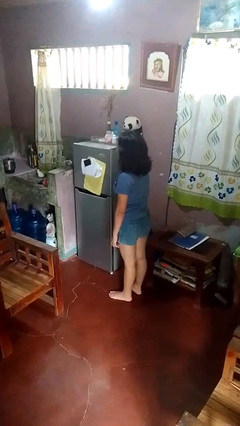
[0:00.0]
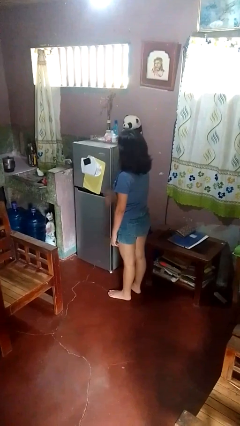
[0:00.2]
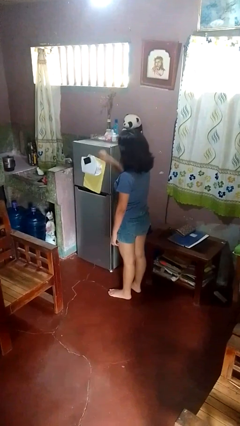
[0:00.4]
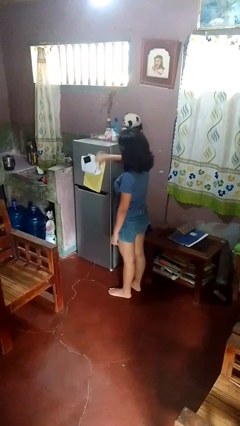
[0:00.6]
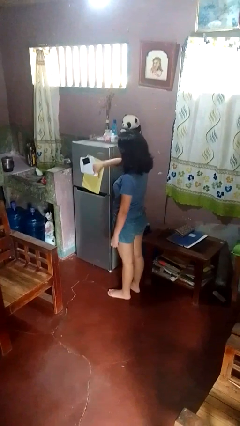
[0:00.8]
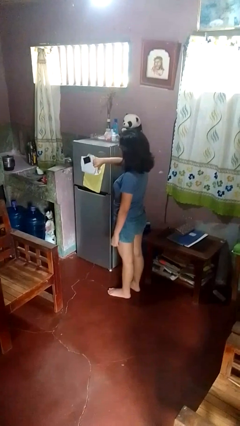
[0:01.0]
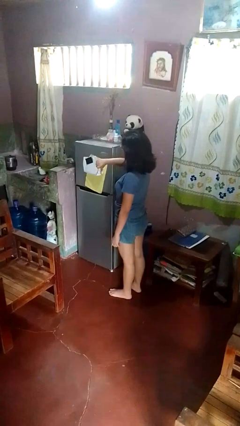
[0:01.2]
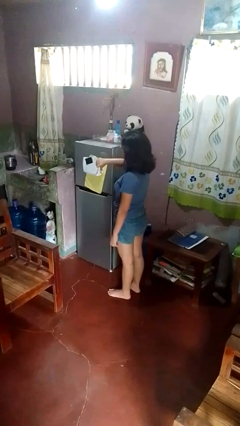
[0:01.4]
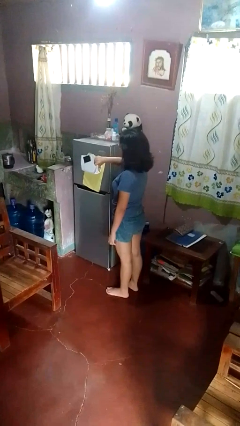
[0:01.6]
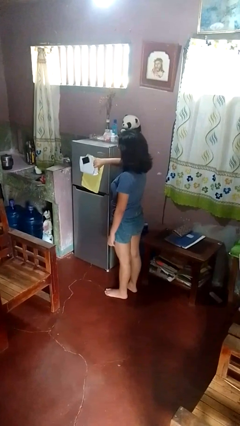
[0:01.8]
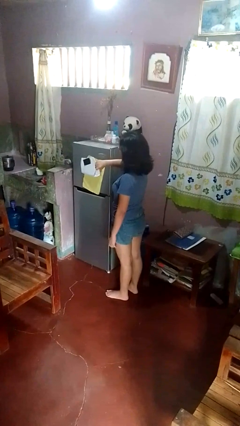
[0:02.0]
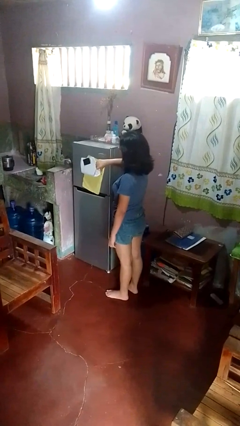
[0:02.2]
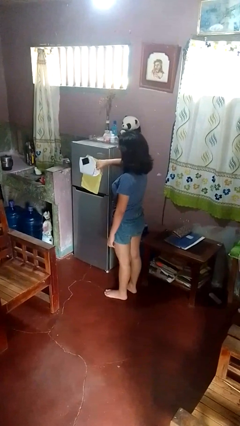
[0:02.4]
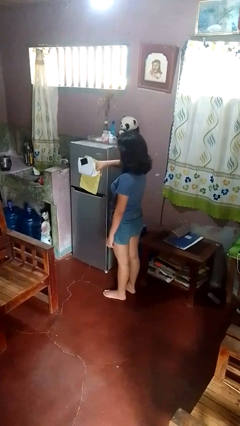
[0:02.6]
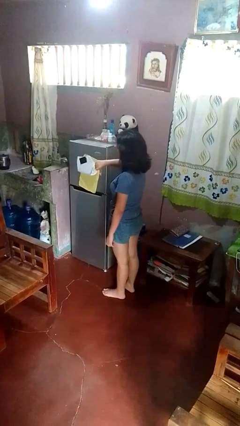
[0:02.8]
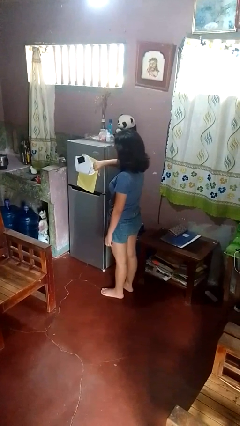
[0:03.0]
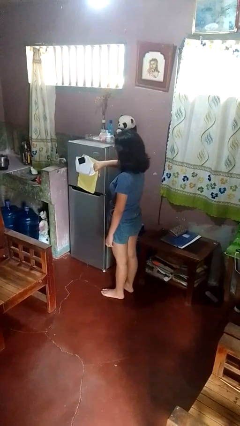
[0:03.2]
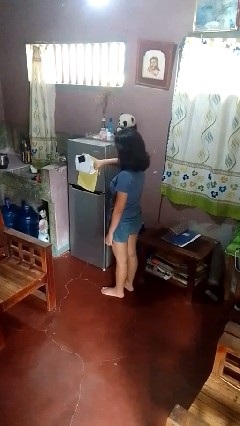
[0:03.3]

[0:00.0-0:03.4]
person gestures thumbs down

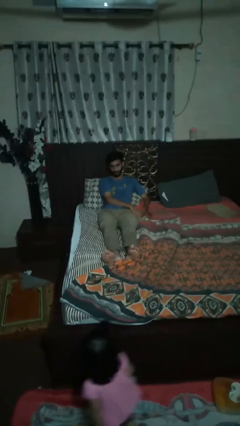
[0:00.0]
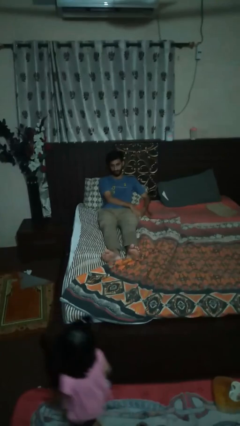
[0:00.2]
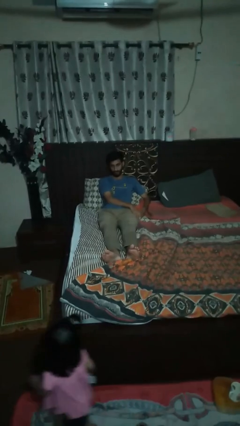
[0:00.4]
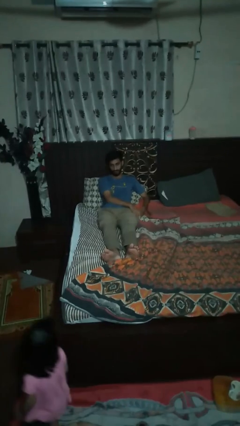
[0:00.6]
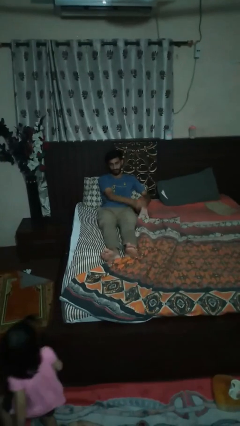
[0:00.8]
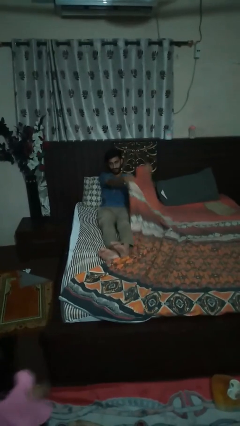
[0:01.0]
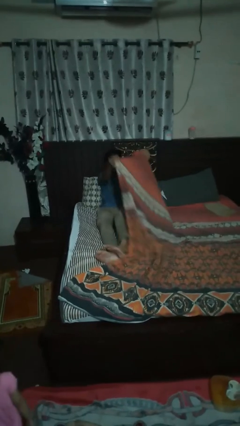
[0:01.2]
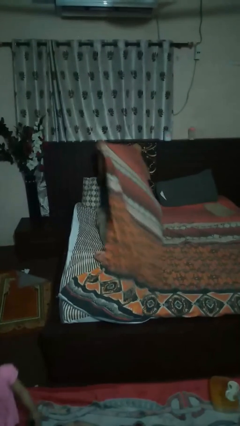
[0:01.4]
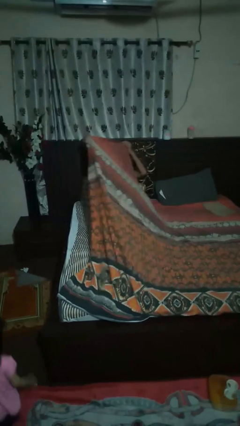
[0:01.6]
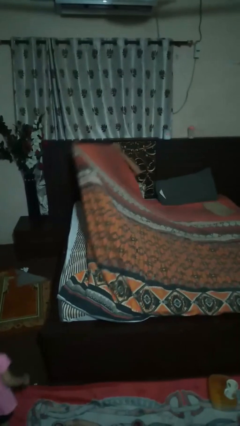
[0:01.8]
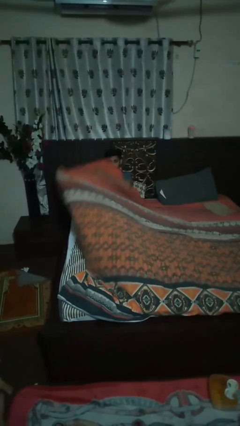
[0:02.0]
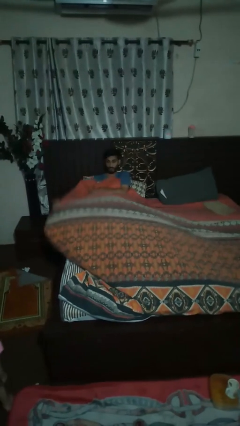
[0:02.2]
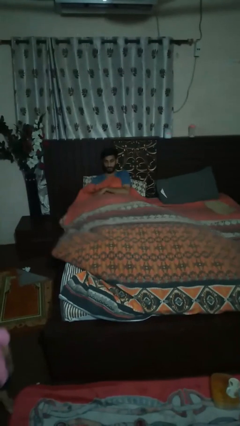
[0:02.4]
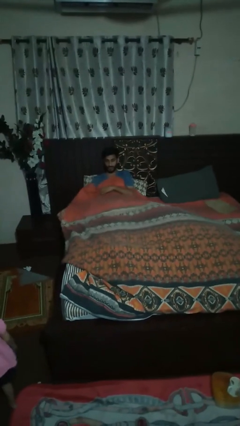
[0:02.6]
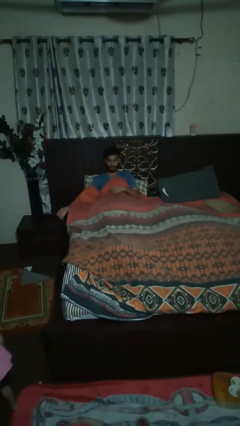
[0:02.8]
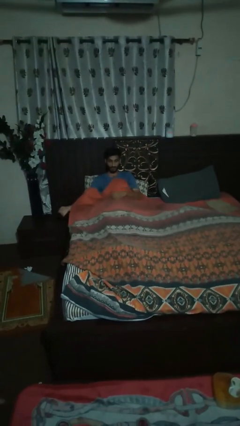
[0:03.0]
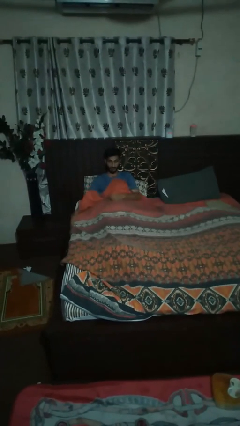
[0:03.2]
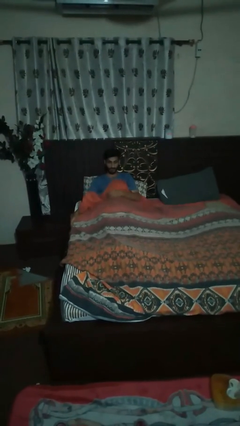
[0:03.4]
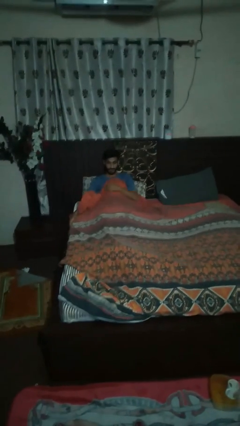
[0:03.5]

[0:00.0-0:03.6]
person covers with bedsheets

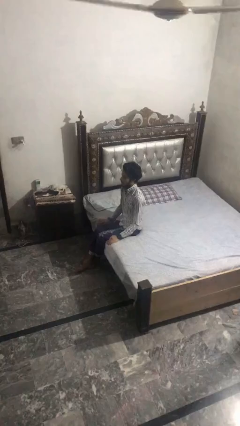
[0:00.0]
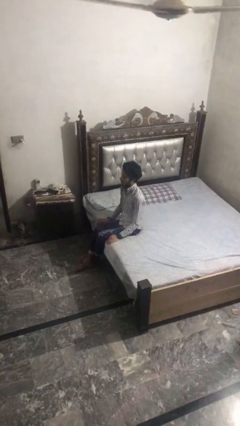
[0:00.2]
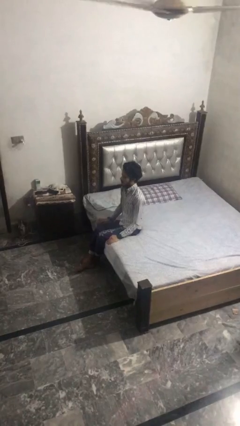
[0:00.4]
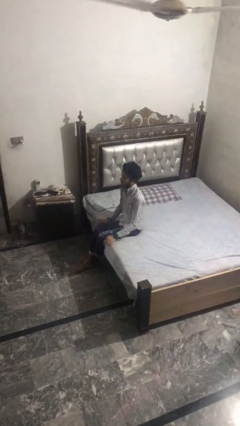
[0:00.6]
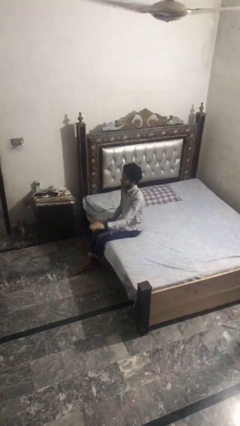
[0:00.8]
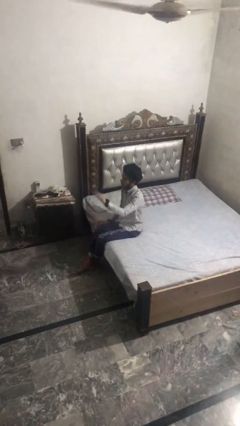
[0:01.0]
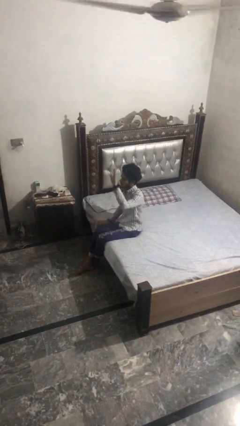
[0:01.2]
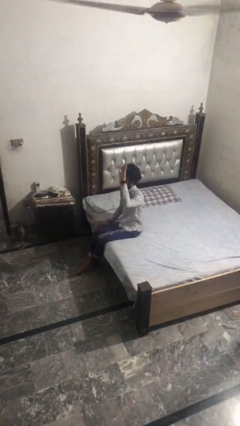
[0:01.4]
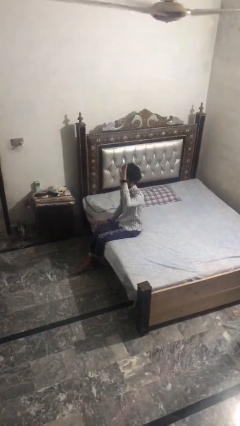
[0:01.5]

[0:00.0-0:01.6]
person gestures raise hand

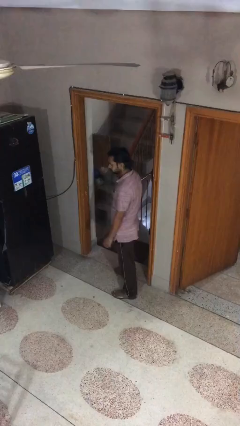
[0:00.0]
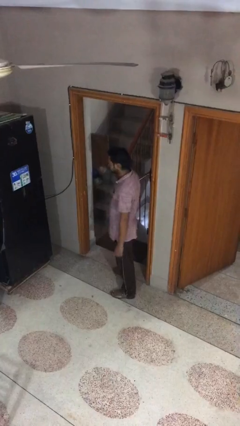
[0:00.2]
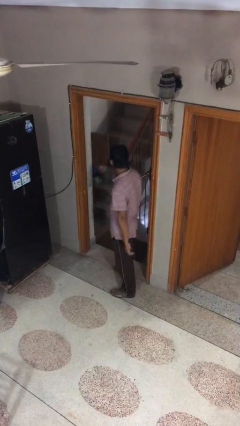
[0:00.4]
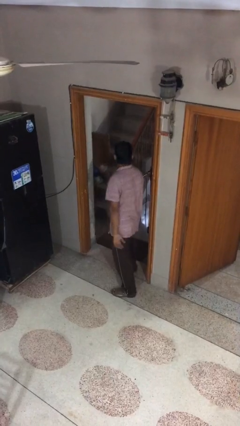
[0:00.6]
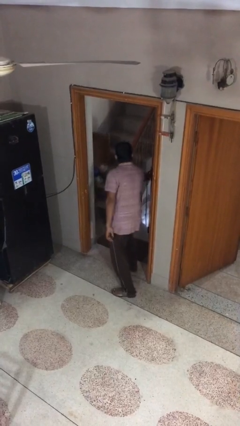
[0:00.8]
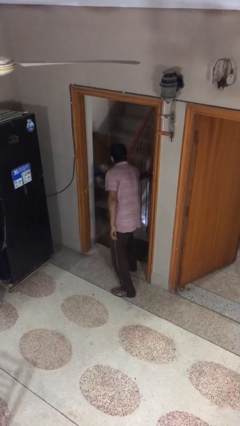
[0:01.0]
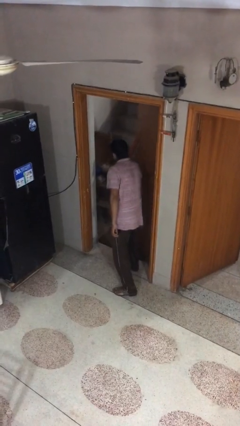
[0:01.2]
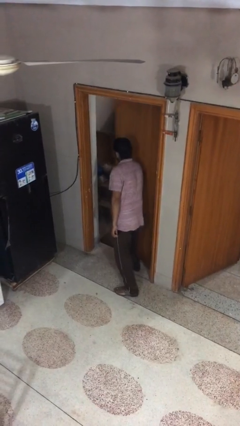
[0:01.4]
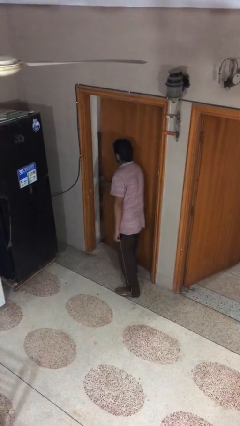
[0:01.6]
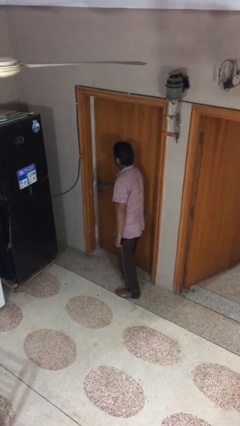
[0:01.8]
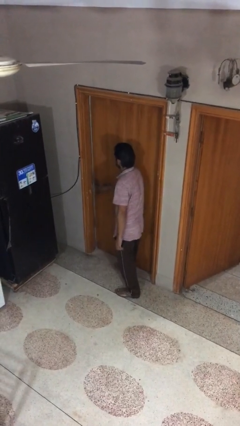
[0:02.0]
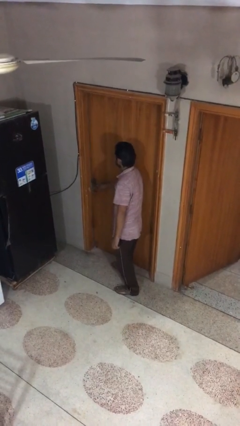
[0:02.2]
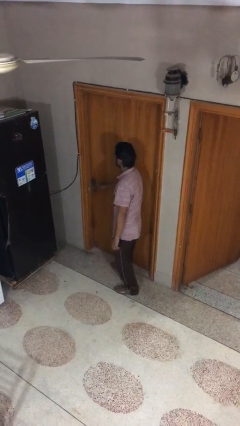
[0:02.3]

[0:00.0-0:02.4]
person closes facility door

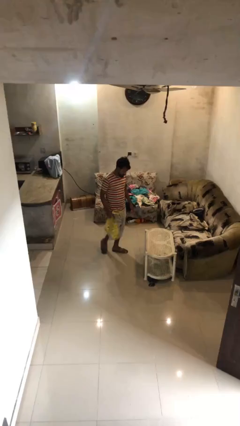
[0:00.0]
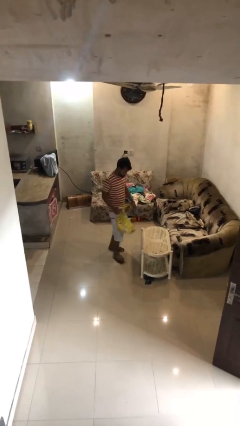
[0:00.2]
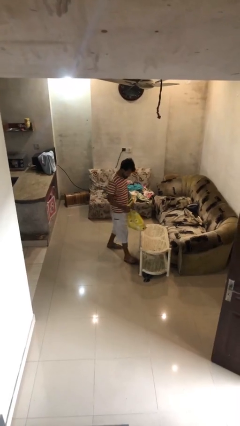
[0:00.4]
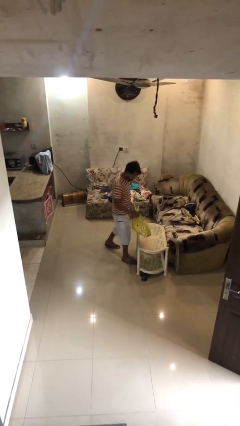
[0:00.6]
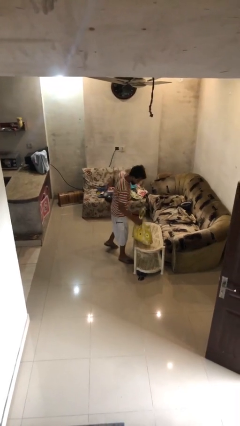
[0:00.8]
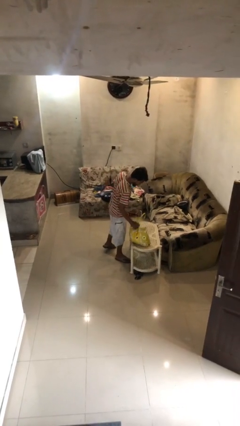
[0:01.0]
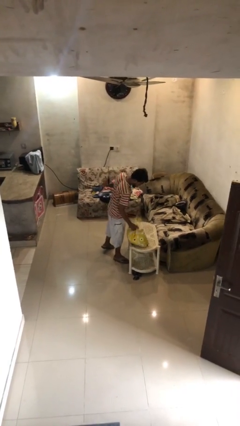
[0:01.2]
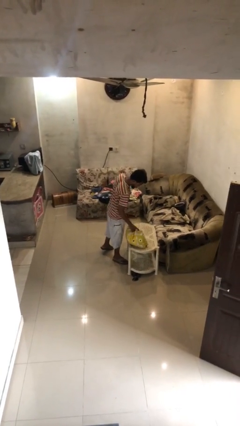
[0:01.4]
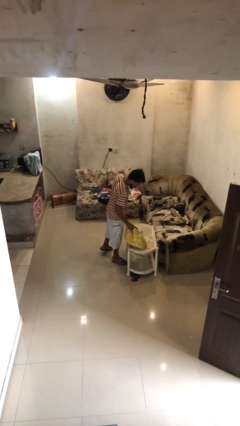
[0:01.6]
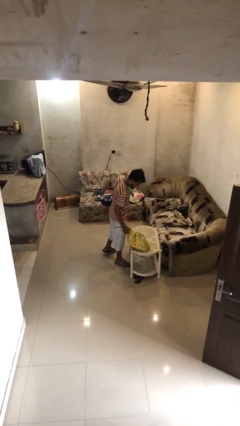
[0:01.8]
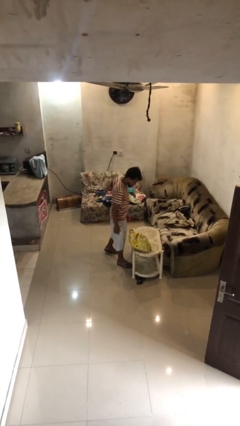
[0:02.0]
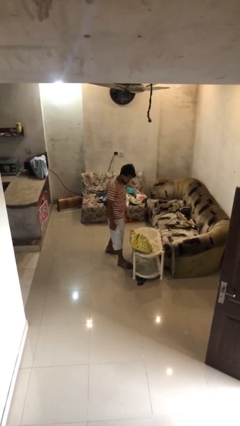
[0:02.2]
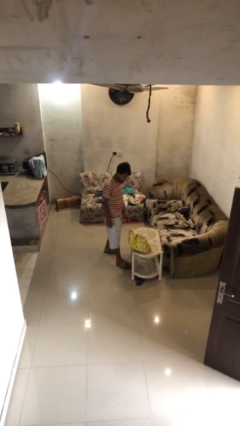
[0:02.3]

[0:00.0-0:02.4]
person puts down object on table

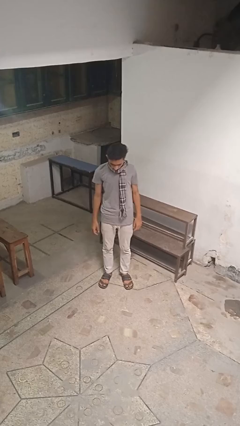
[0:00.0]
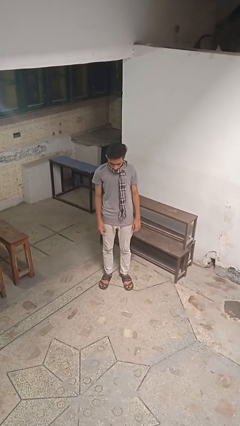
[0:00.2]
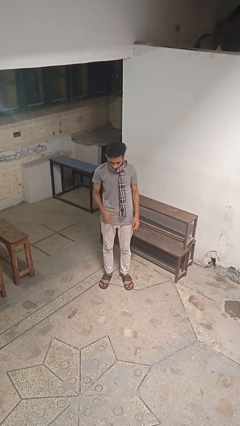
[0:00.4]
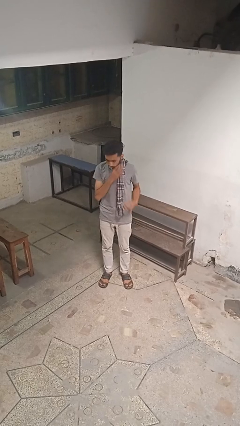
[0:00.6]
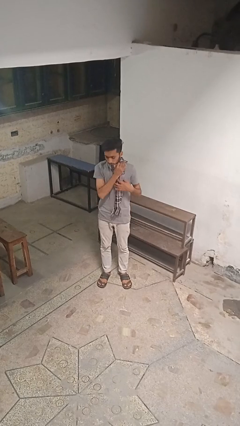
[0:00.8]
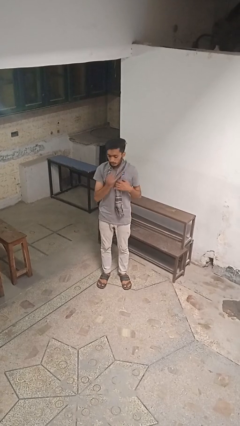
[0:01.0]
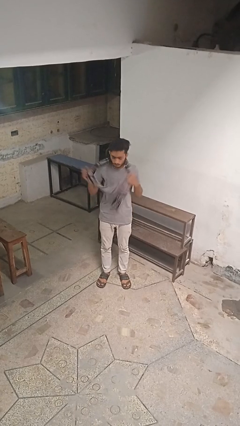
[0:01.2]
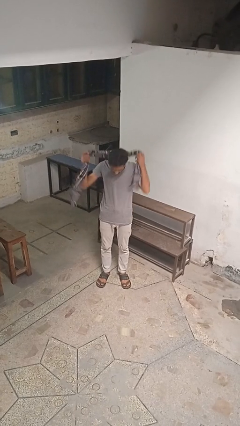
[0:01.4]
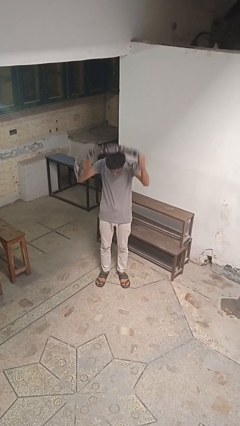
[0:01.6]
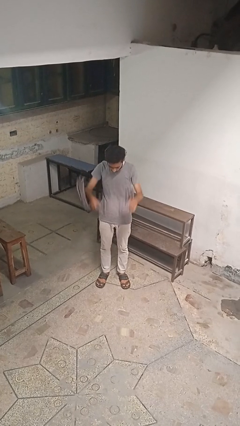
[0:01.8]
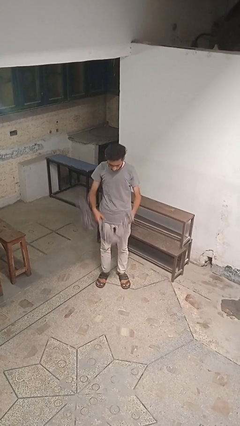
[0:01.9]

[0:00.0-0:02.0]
person takes off scarf

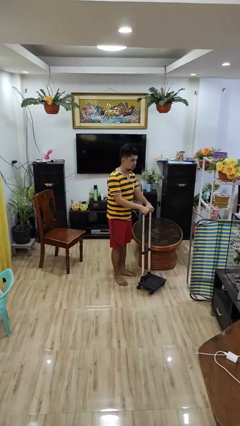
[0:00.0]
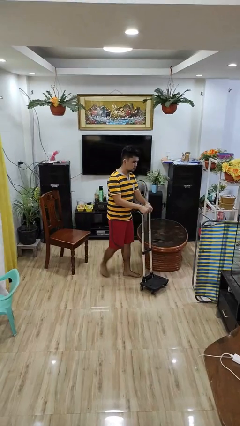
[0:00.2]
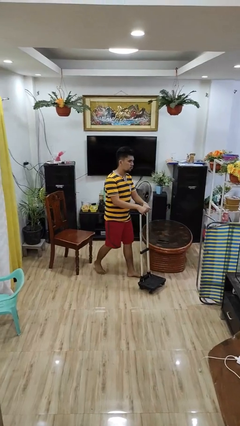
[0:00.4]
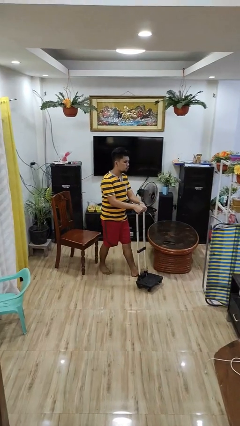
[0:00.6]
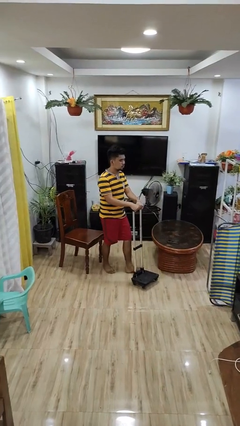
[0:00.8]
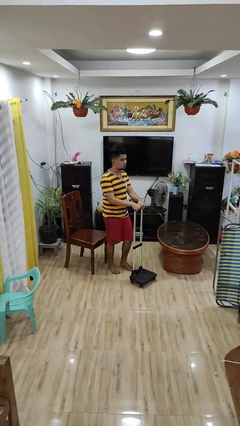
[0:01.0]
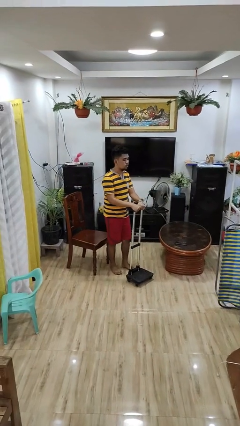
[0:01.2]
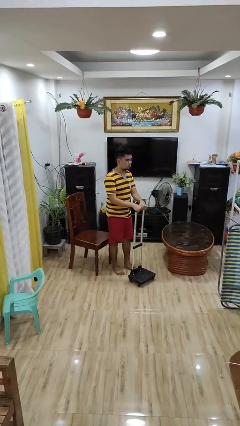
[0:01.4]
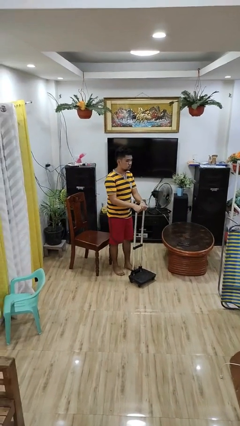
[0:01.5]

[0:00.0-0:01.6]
person pulls wheeled cart

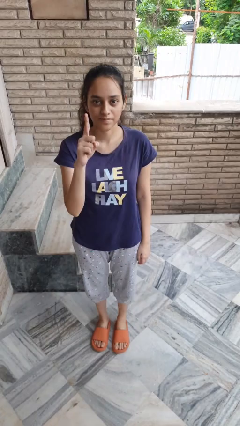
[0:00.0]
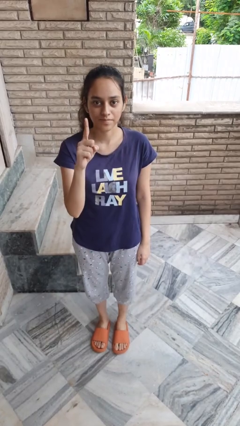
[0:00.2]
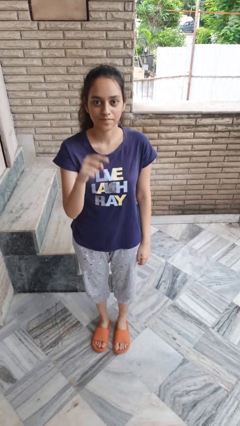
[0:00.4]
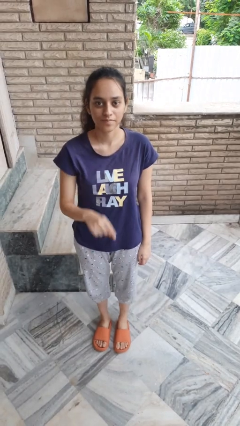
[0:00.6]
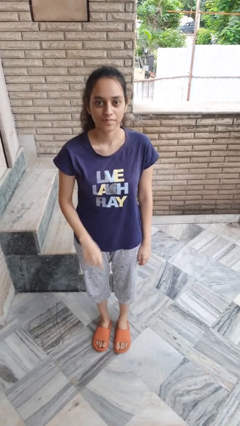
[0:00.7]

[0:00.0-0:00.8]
person gestures number one
